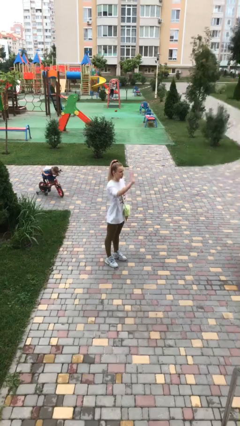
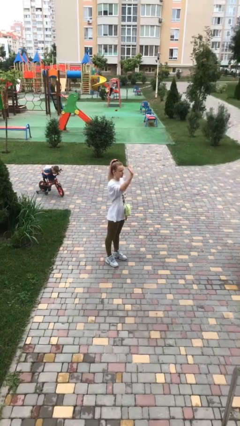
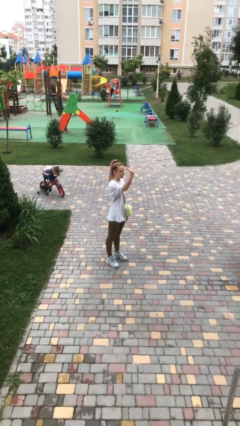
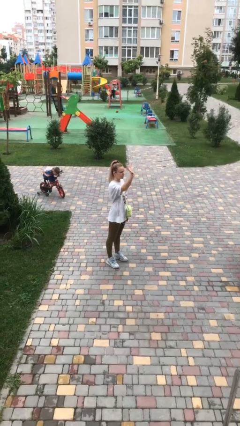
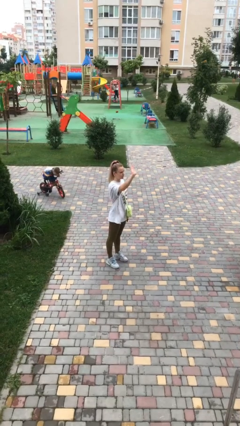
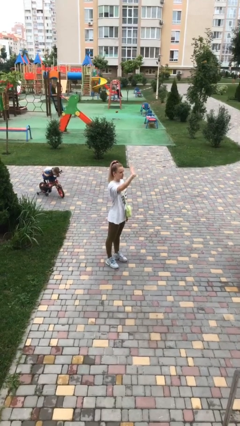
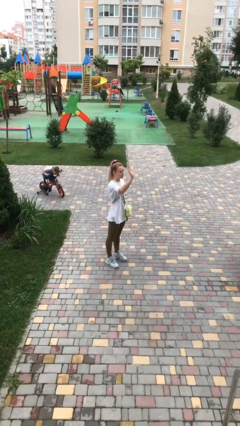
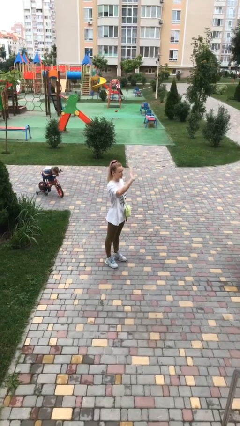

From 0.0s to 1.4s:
person waves at person

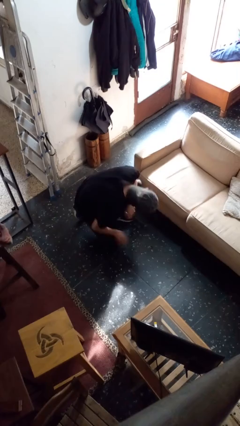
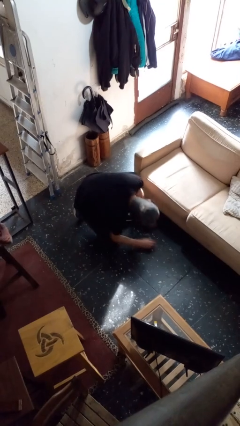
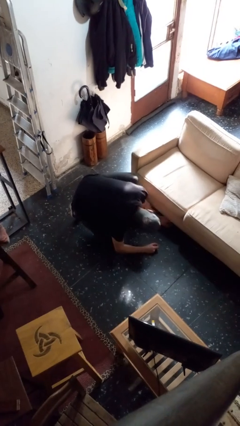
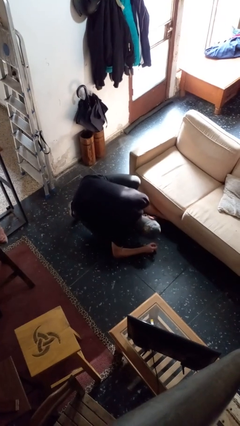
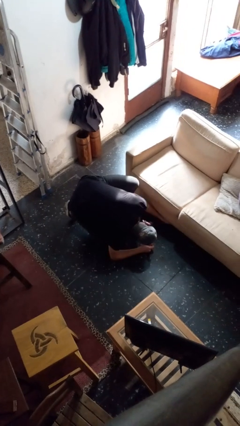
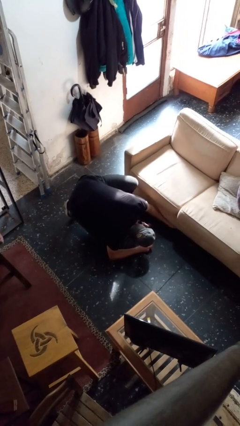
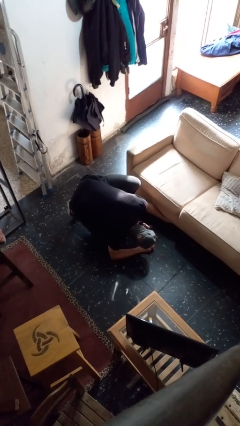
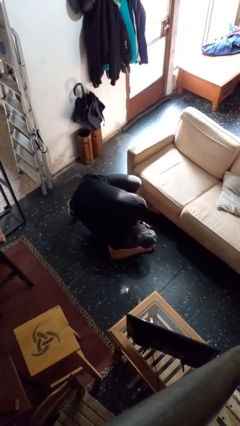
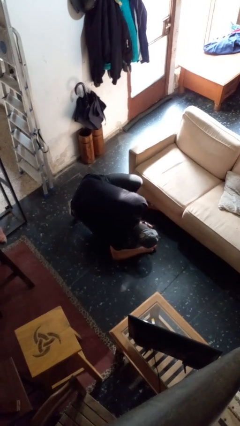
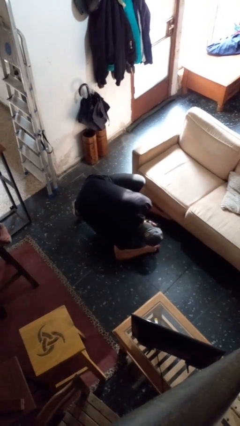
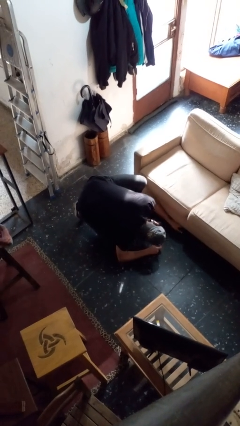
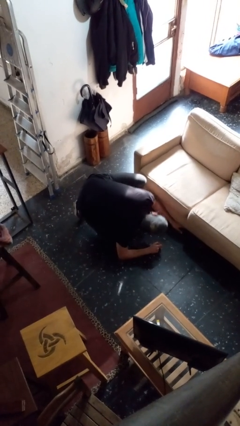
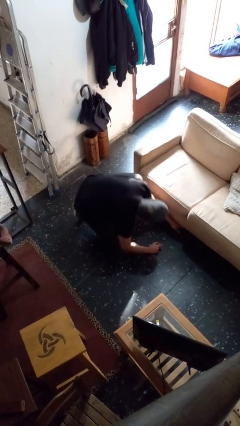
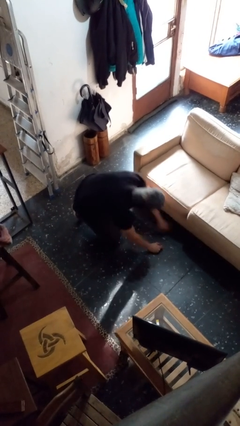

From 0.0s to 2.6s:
person searches under couch

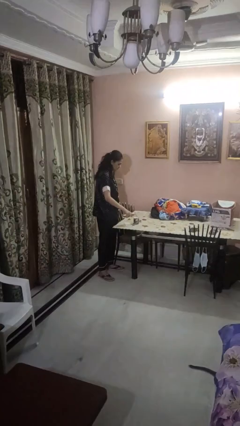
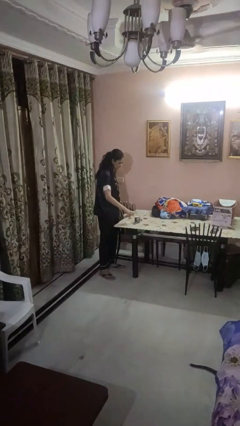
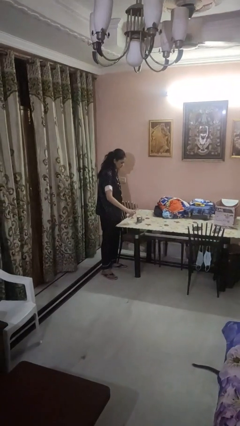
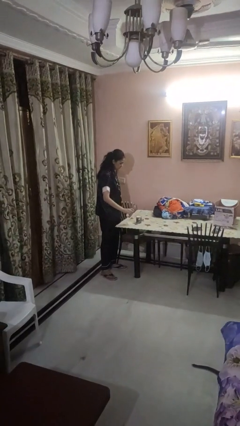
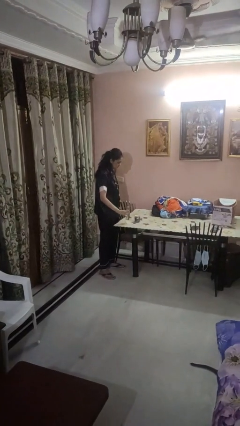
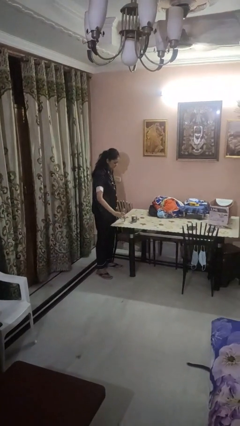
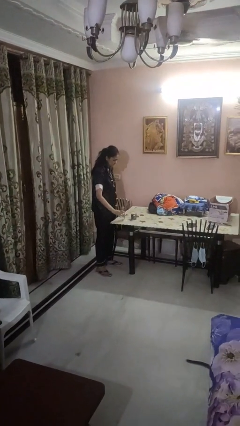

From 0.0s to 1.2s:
person pours liquid into cup

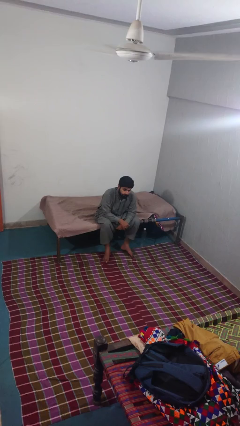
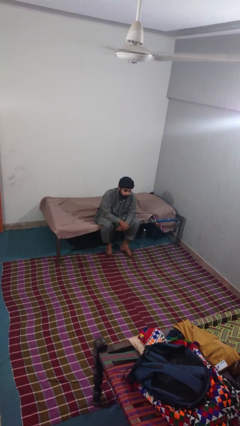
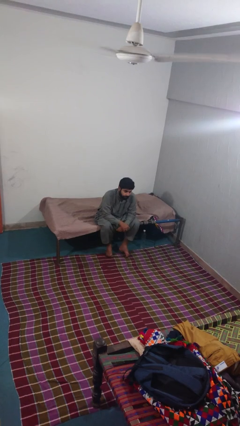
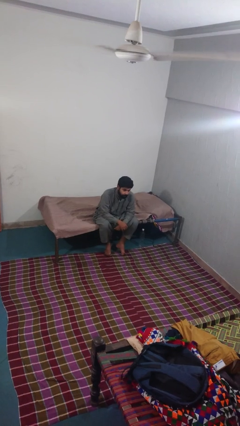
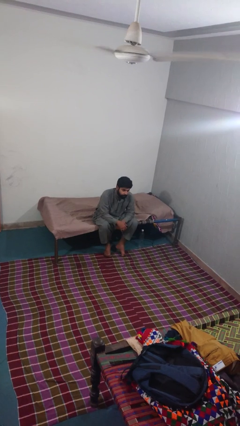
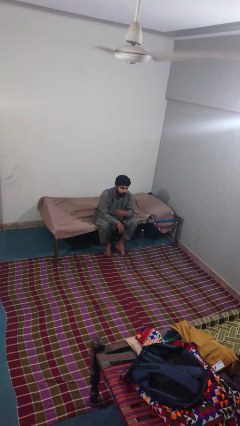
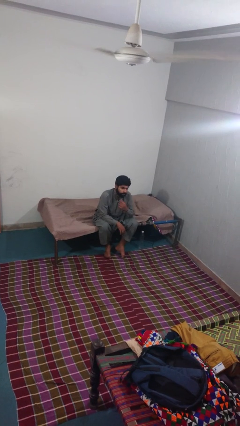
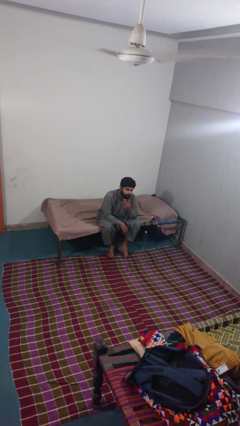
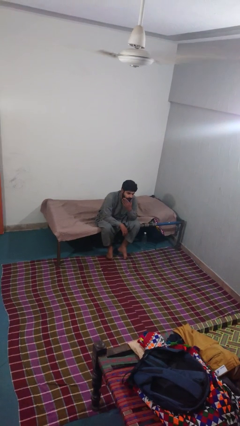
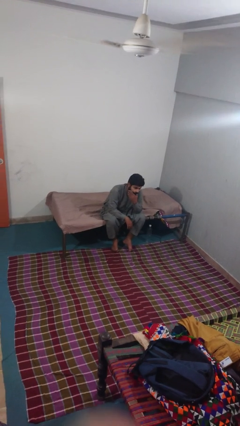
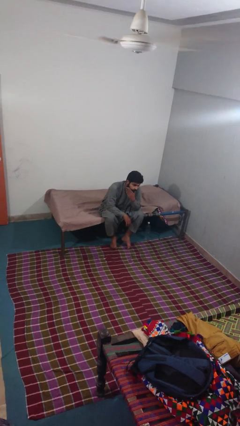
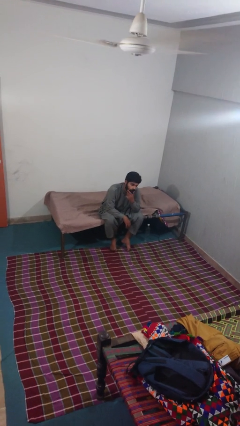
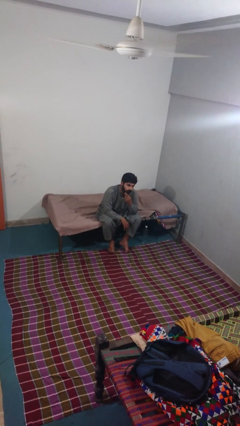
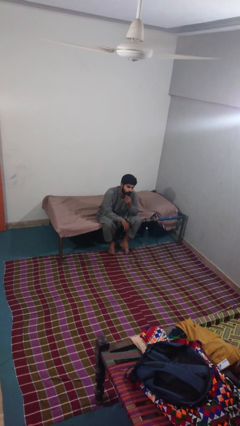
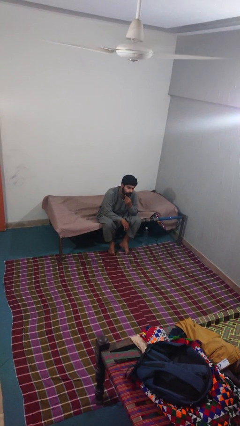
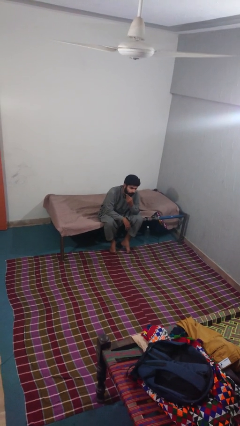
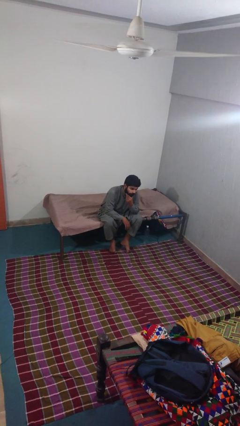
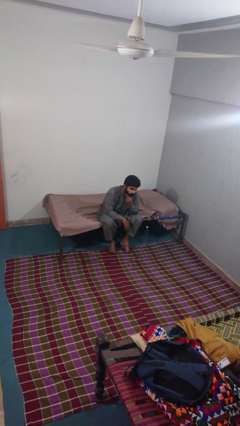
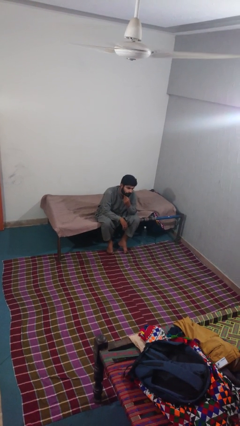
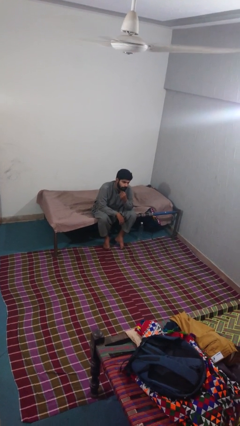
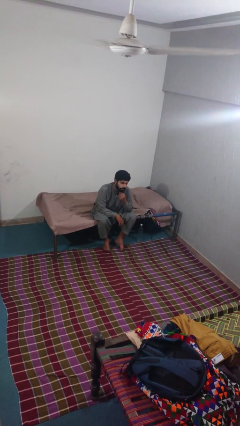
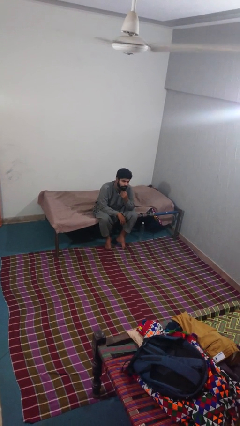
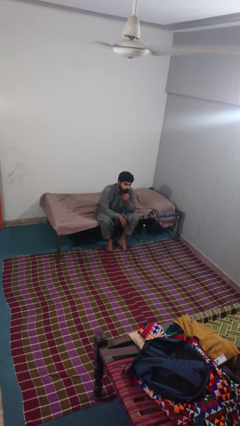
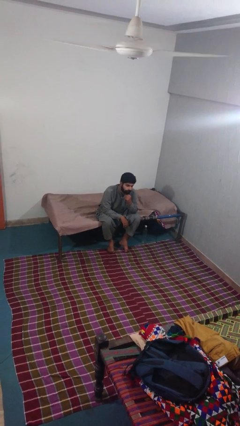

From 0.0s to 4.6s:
person strokes chin

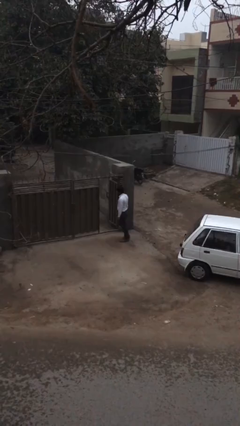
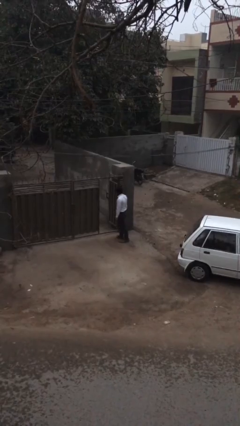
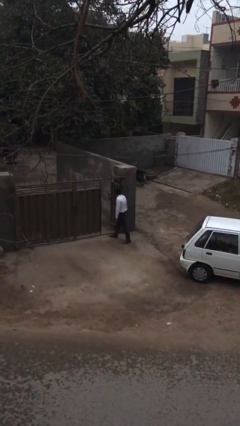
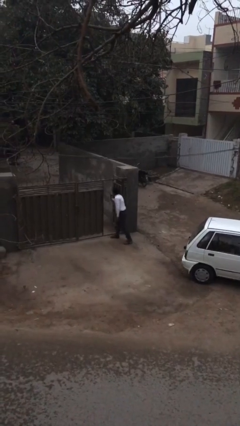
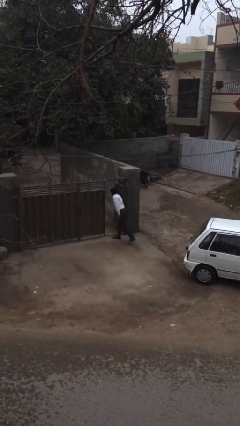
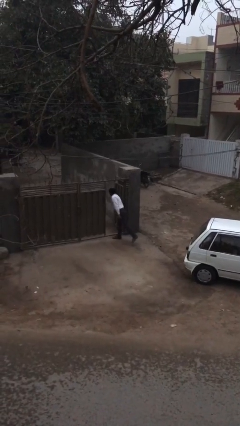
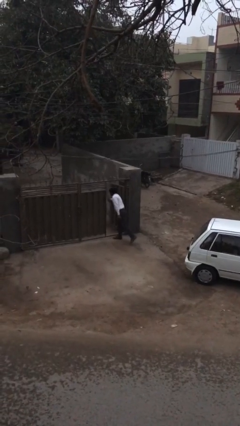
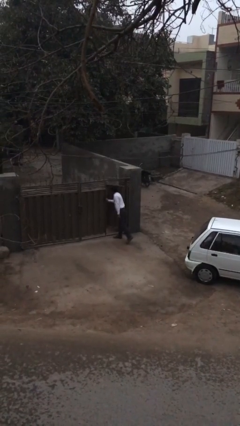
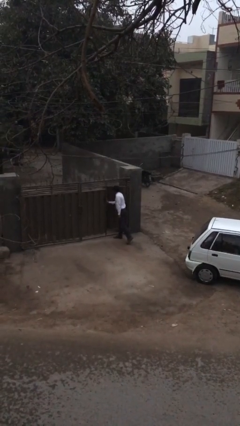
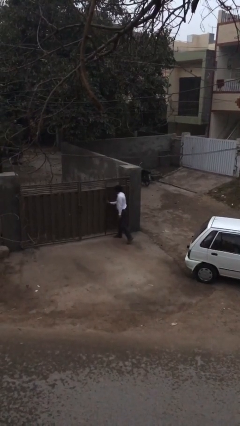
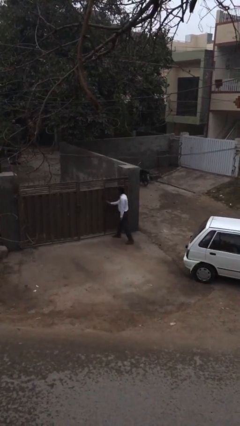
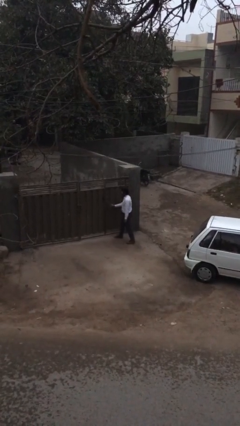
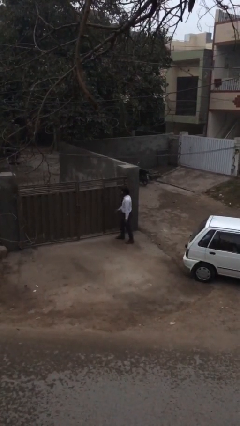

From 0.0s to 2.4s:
person closes facility door

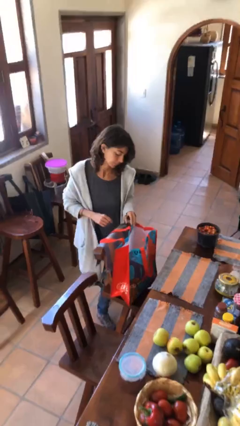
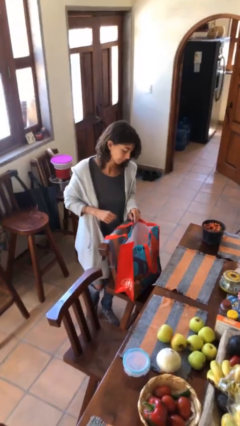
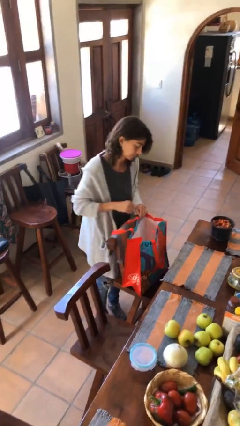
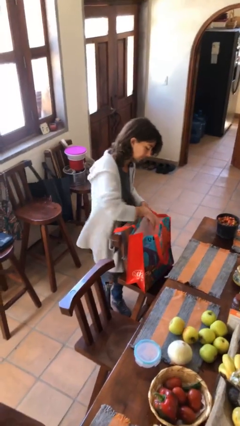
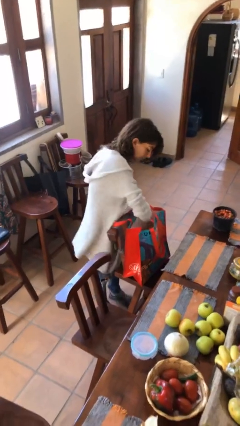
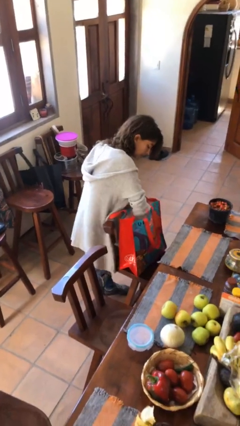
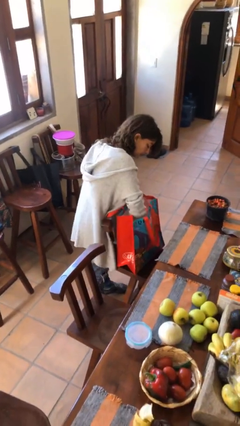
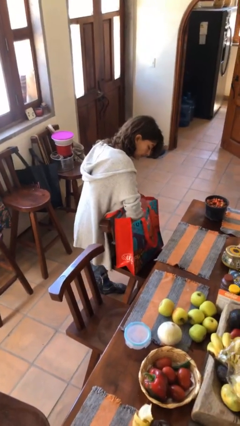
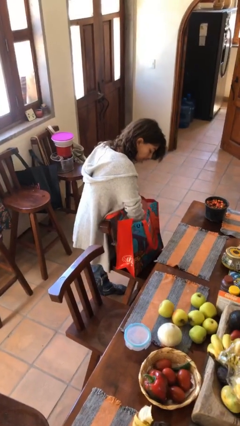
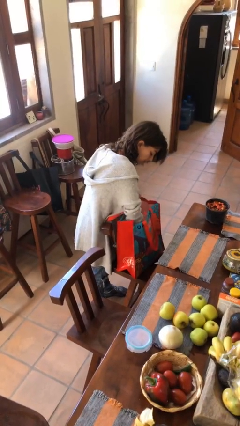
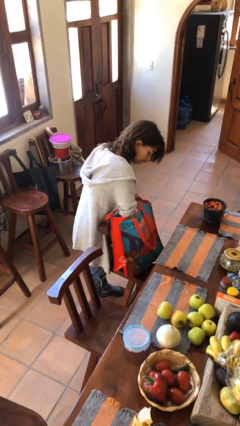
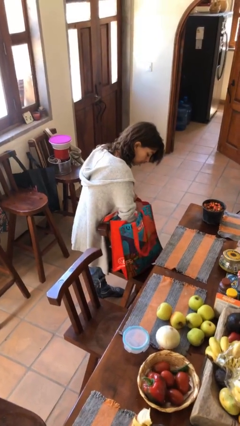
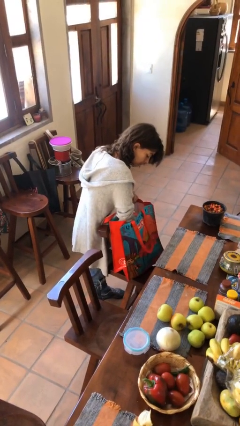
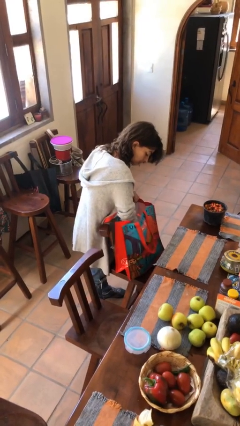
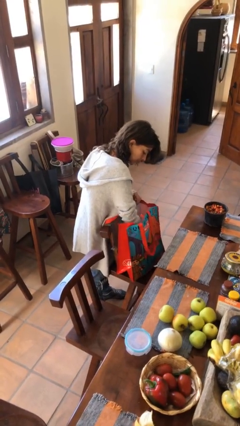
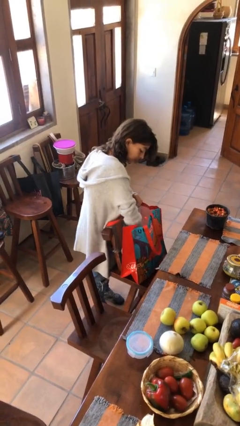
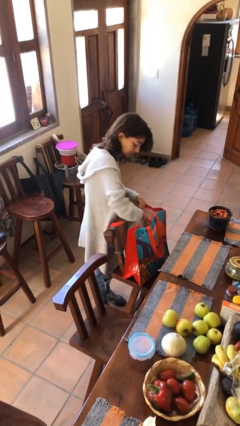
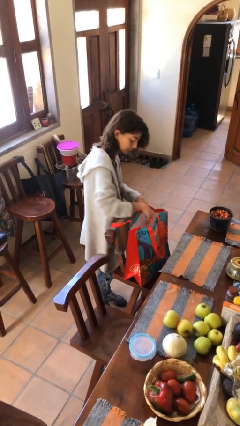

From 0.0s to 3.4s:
person searches in bag

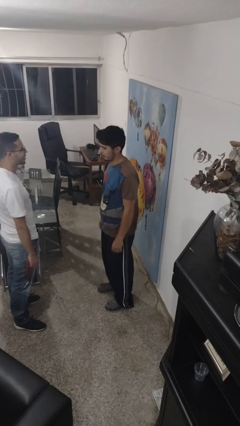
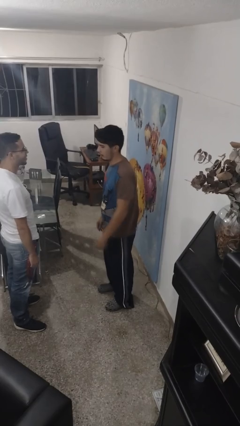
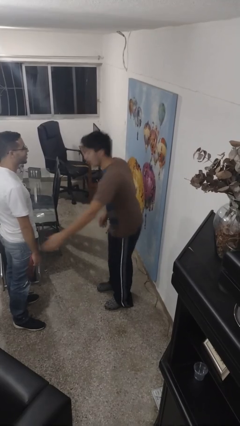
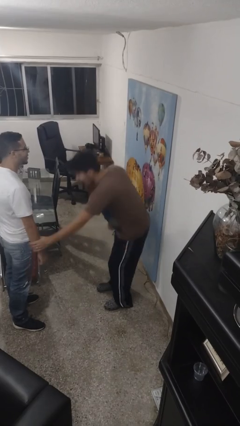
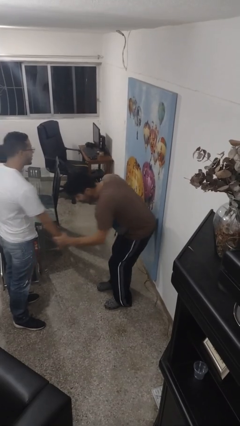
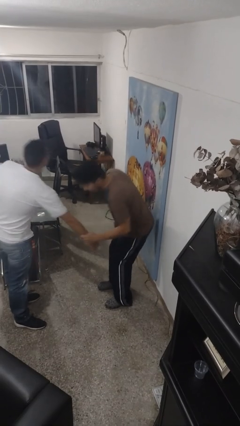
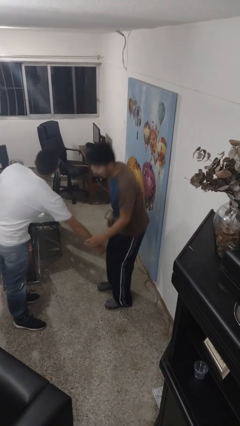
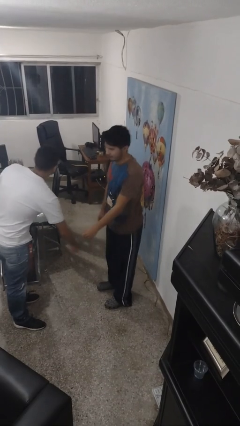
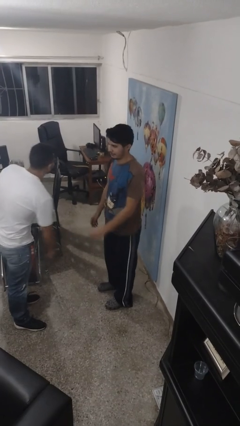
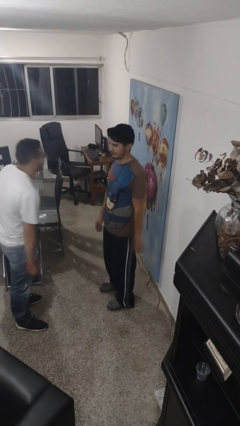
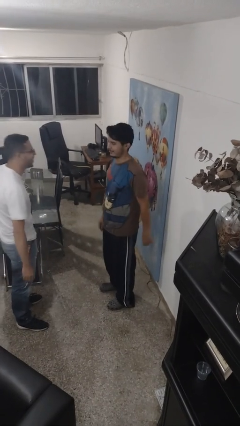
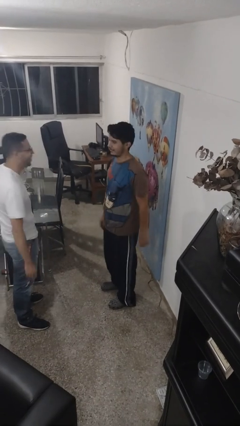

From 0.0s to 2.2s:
person grabs person by forearm
